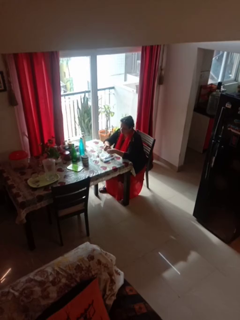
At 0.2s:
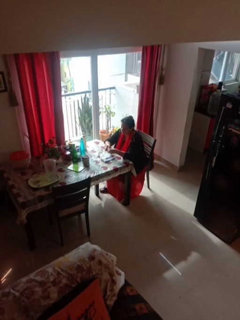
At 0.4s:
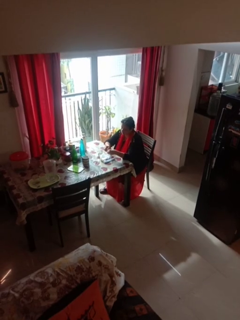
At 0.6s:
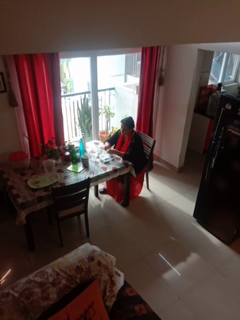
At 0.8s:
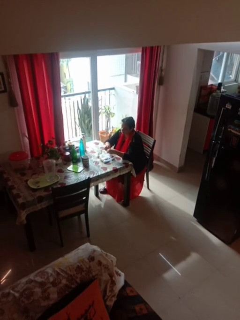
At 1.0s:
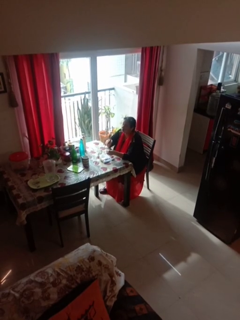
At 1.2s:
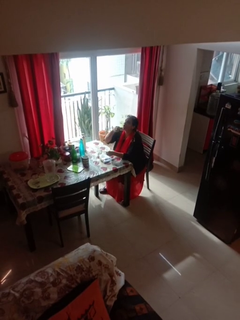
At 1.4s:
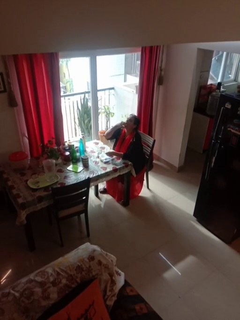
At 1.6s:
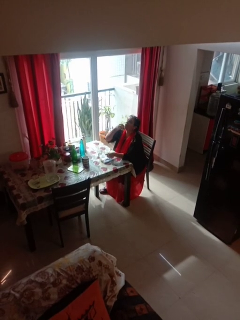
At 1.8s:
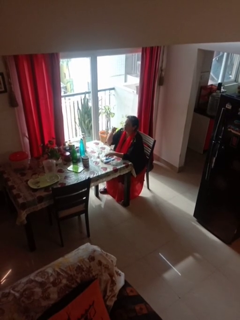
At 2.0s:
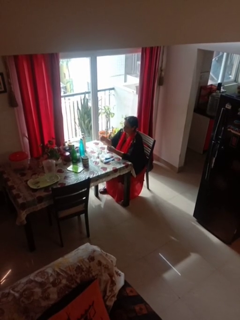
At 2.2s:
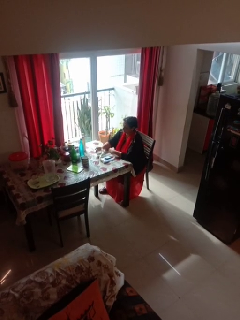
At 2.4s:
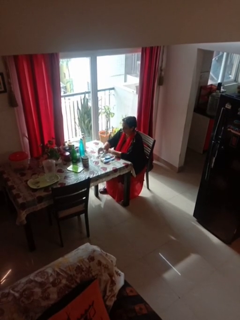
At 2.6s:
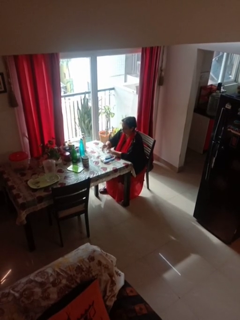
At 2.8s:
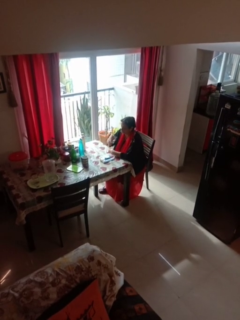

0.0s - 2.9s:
person takes medicine pills

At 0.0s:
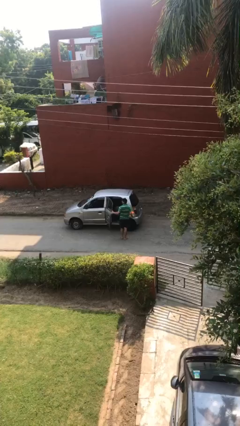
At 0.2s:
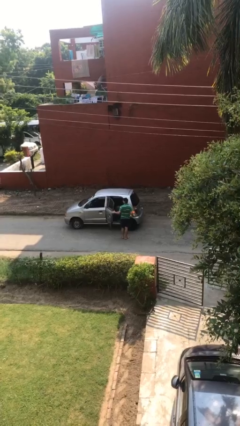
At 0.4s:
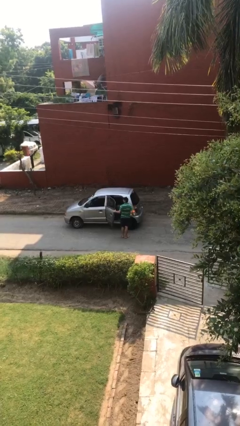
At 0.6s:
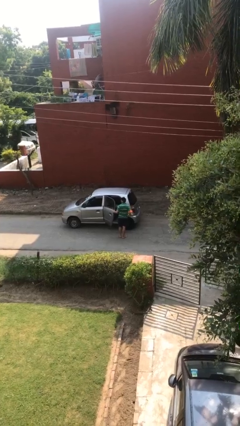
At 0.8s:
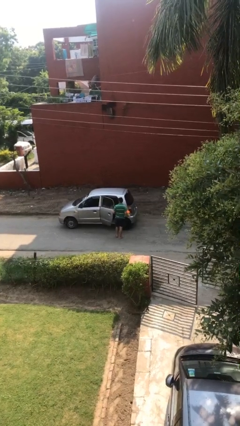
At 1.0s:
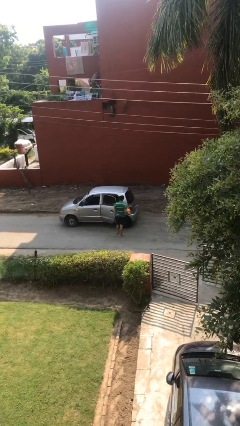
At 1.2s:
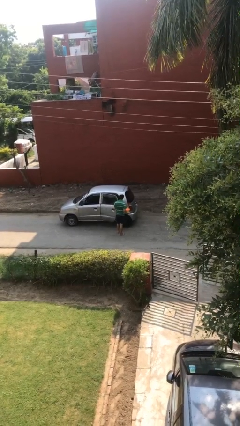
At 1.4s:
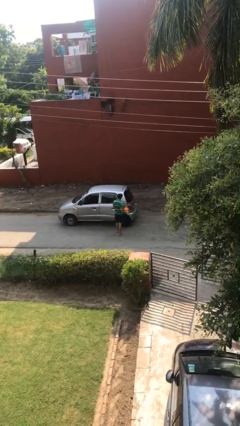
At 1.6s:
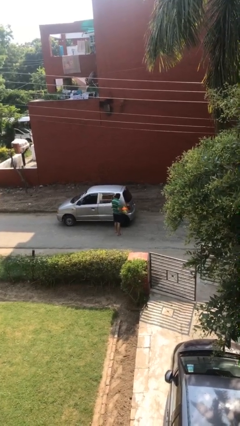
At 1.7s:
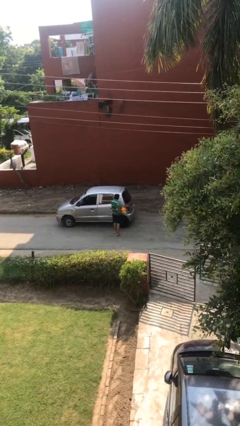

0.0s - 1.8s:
person closes car door

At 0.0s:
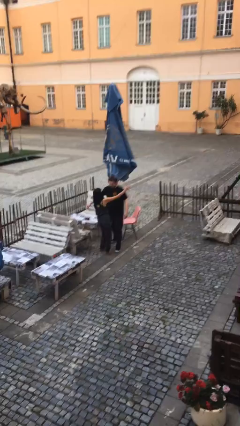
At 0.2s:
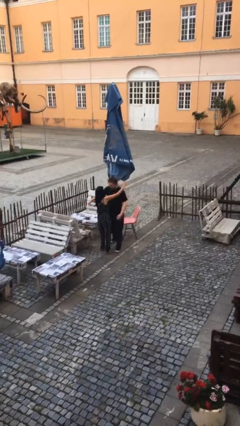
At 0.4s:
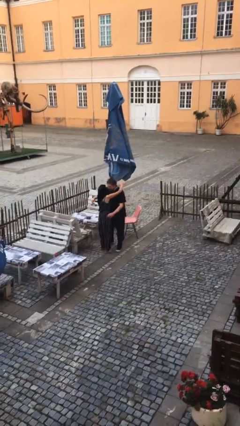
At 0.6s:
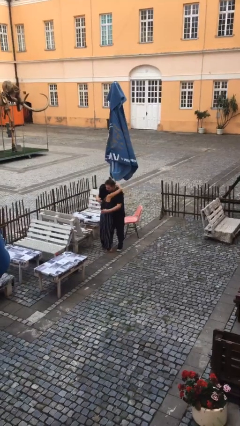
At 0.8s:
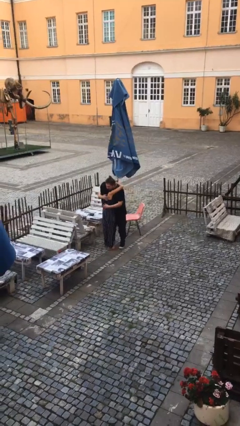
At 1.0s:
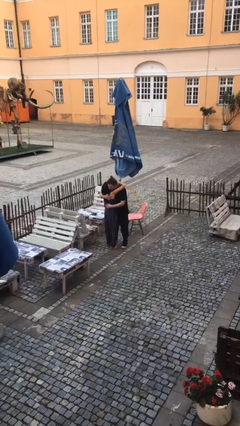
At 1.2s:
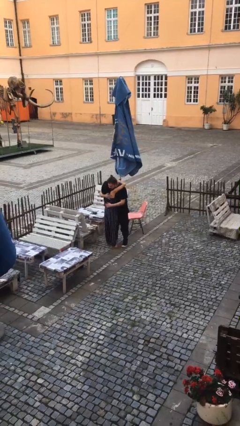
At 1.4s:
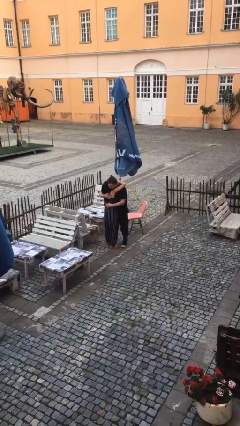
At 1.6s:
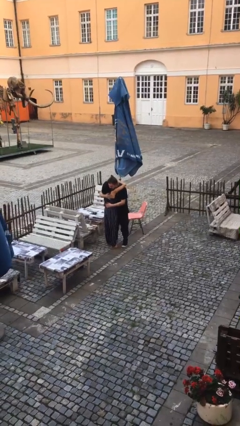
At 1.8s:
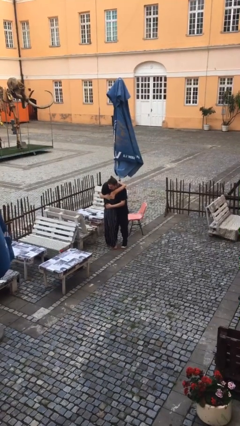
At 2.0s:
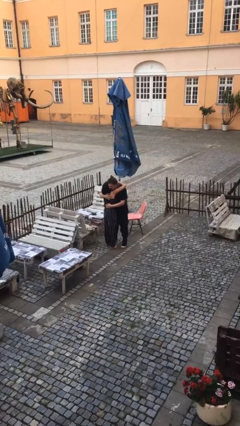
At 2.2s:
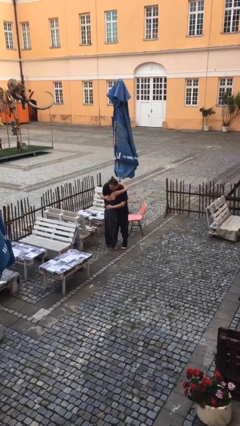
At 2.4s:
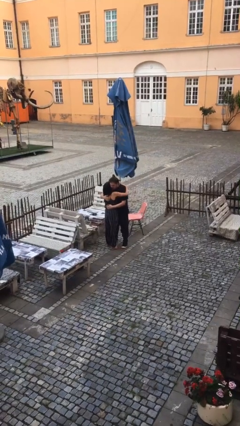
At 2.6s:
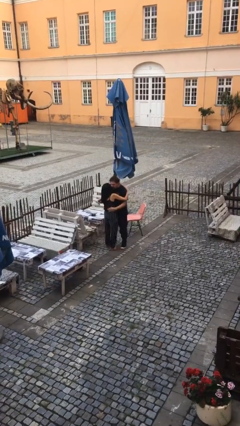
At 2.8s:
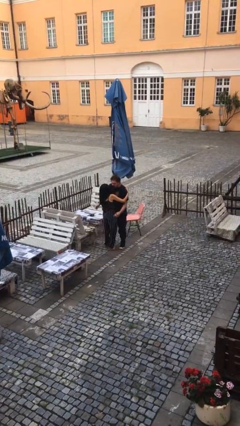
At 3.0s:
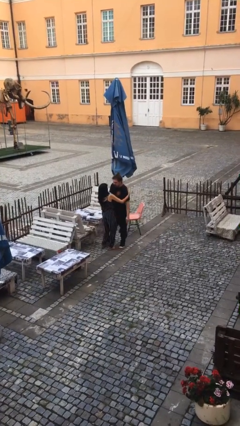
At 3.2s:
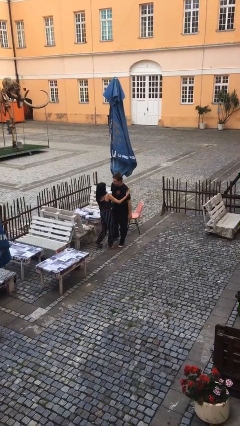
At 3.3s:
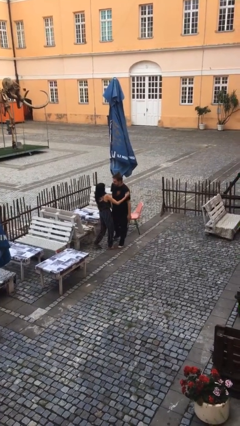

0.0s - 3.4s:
person embraces person

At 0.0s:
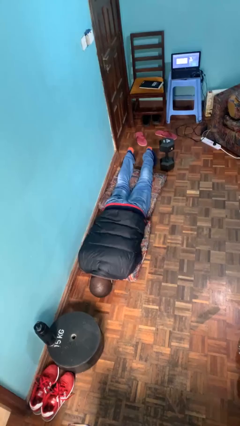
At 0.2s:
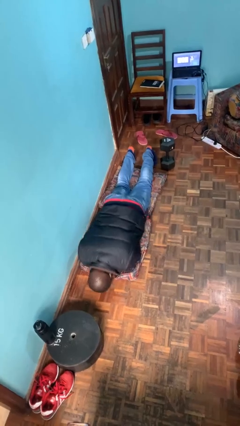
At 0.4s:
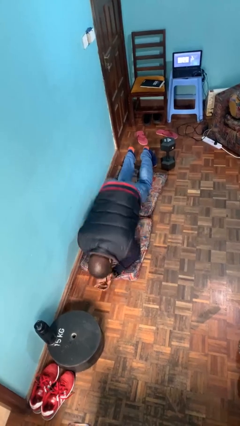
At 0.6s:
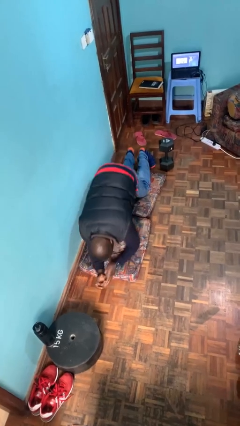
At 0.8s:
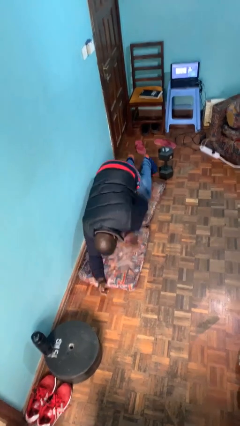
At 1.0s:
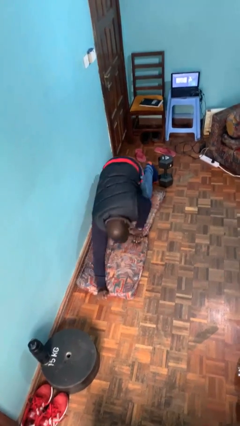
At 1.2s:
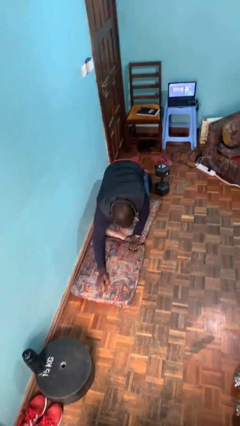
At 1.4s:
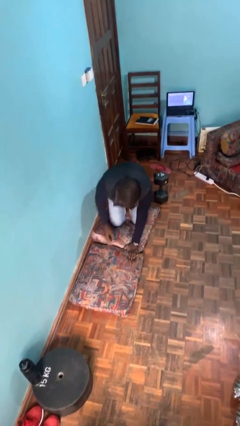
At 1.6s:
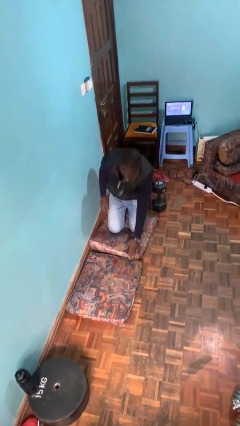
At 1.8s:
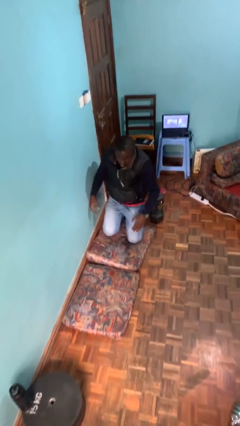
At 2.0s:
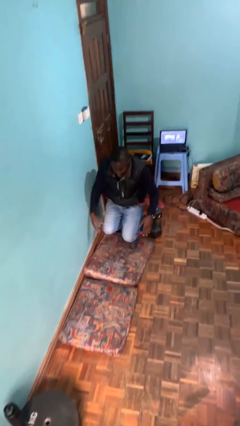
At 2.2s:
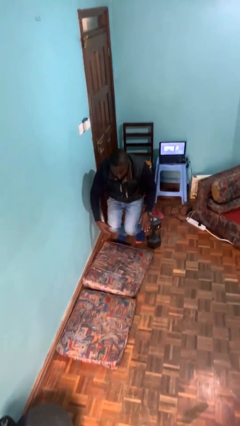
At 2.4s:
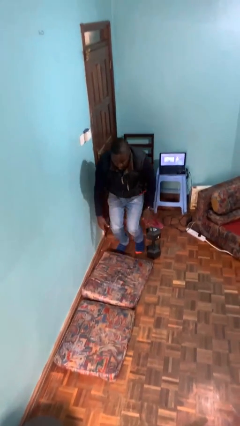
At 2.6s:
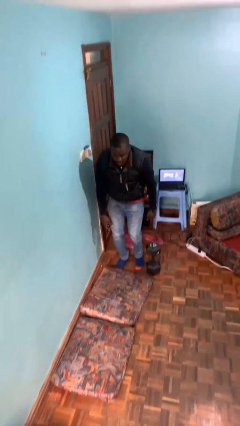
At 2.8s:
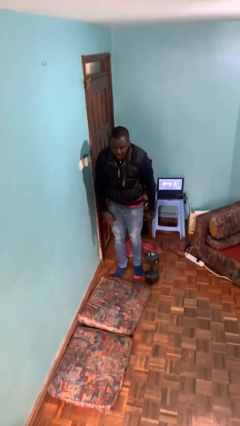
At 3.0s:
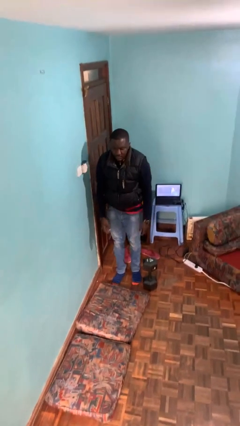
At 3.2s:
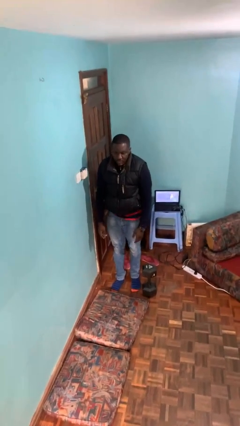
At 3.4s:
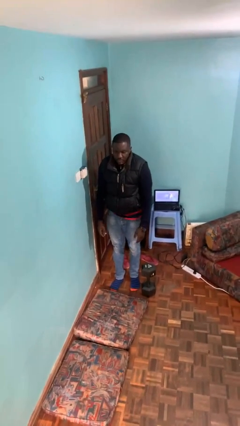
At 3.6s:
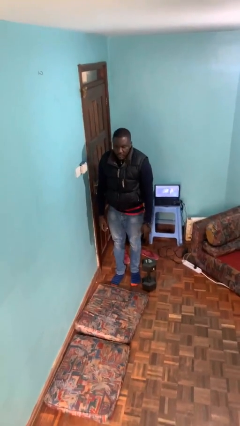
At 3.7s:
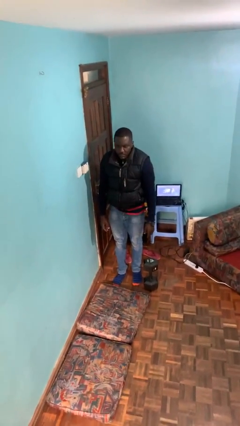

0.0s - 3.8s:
person stands up from floor

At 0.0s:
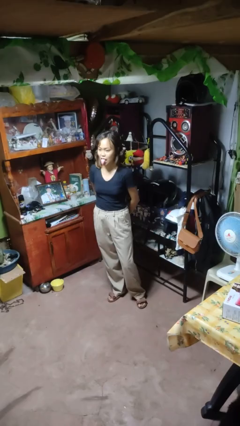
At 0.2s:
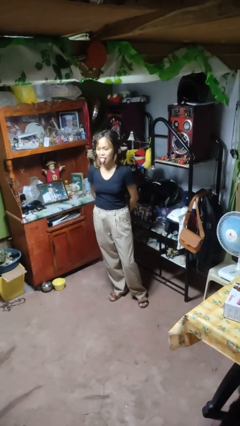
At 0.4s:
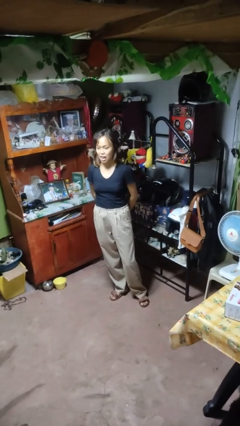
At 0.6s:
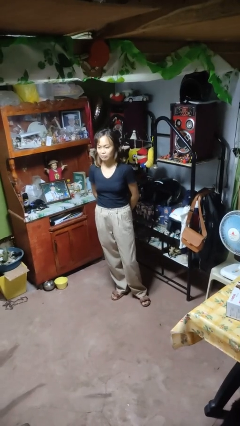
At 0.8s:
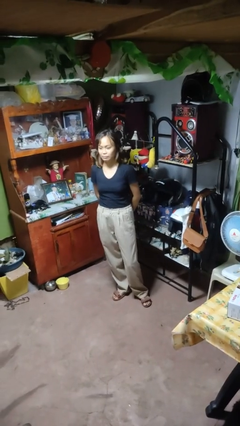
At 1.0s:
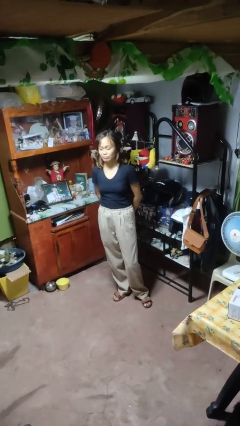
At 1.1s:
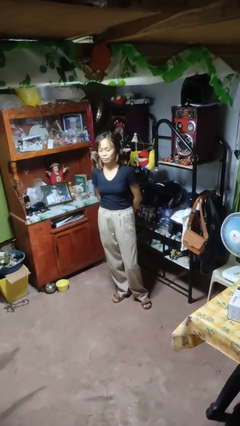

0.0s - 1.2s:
person sticks out tongue

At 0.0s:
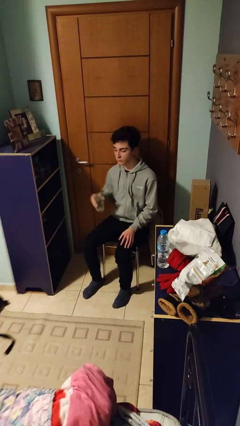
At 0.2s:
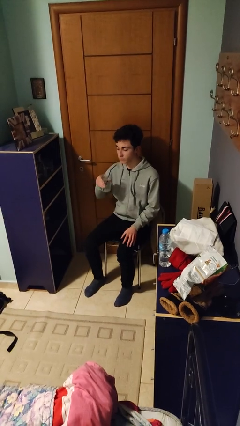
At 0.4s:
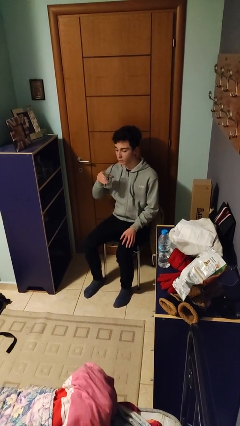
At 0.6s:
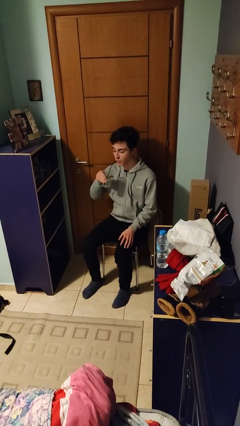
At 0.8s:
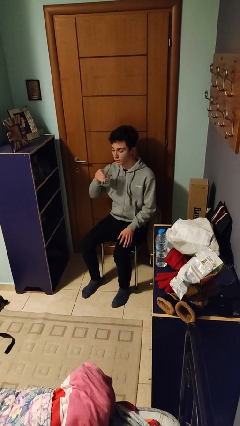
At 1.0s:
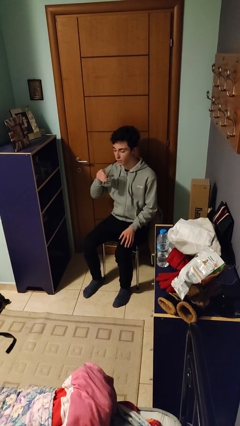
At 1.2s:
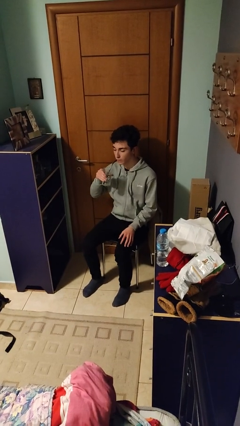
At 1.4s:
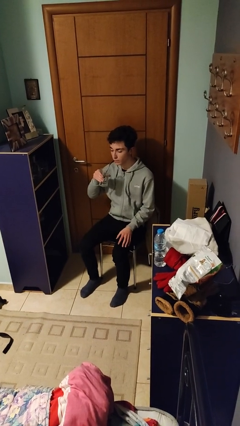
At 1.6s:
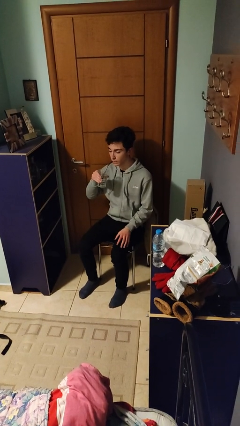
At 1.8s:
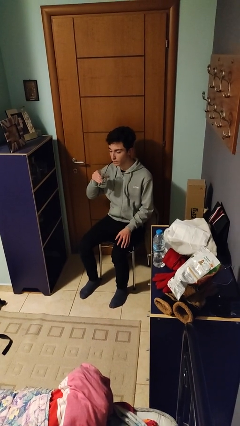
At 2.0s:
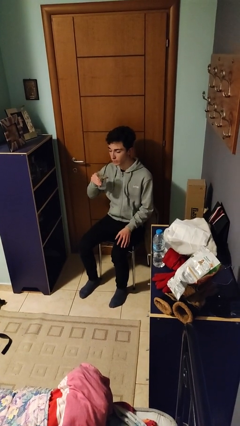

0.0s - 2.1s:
person drinks from straw

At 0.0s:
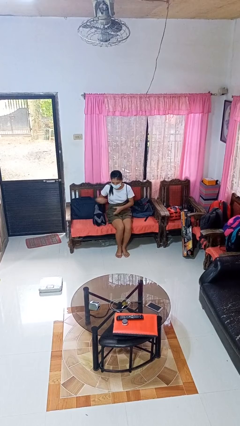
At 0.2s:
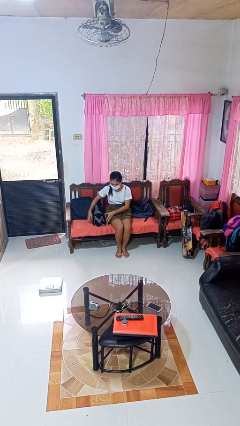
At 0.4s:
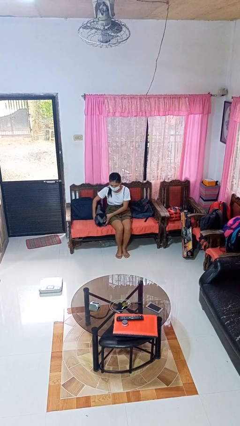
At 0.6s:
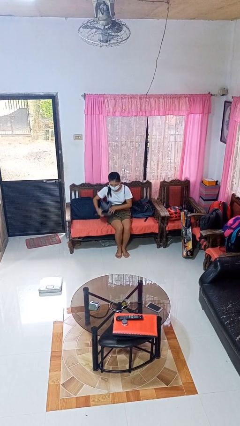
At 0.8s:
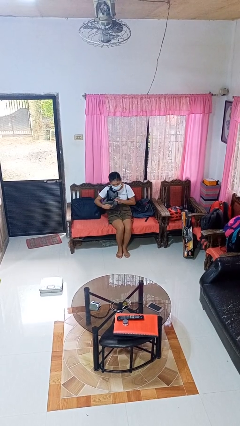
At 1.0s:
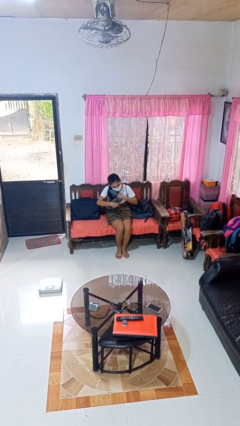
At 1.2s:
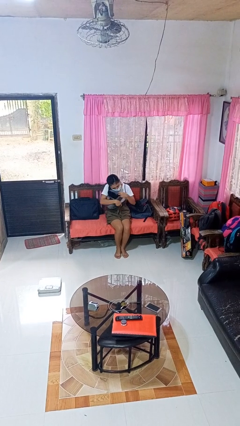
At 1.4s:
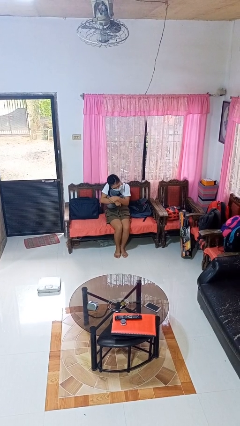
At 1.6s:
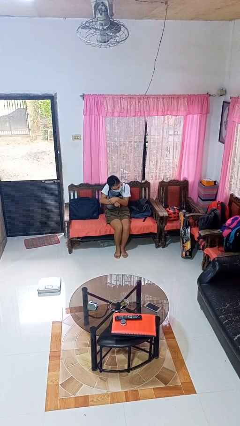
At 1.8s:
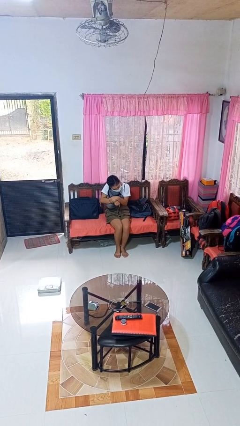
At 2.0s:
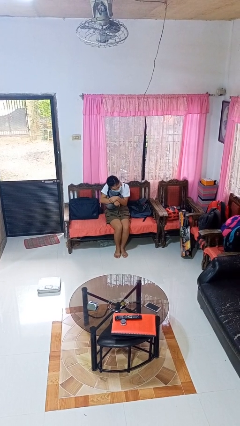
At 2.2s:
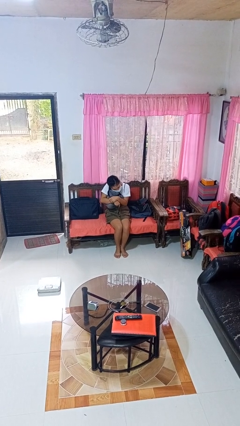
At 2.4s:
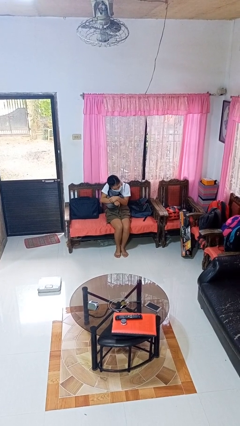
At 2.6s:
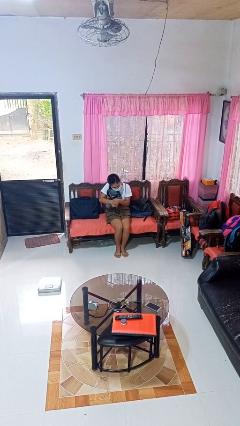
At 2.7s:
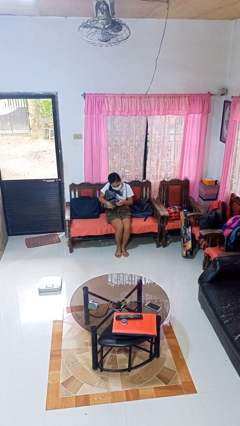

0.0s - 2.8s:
person hugs stuffed animal
